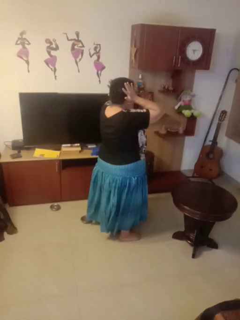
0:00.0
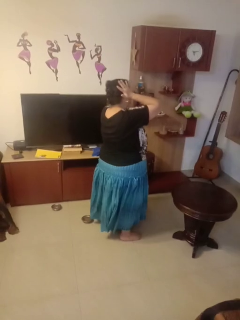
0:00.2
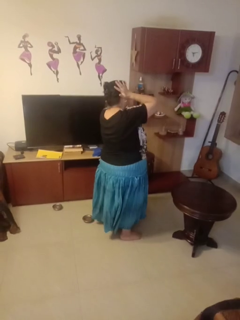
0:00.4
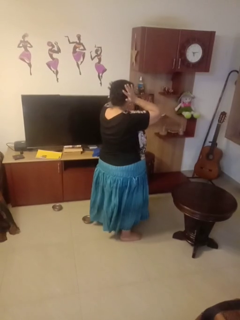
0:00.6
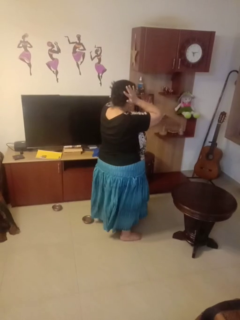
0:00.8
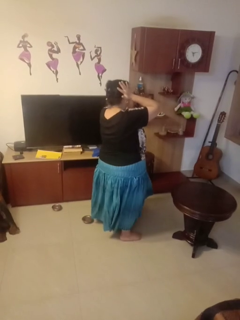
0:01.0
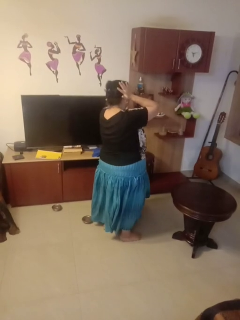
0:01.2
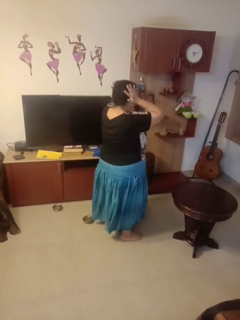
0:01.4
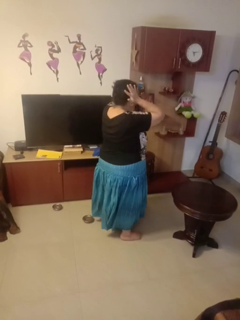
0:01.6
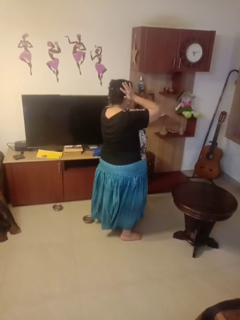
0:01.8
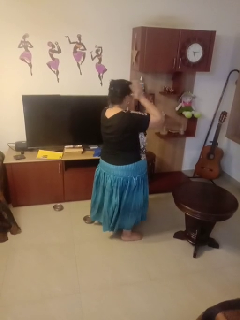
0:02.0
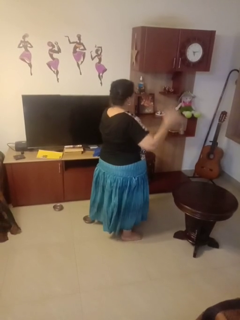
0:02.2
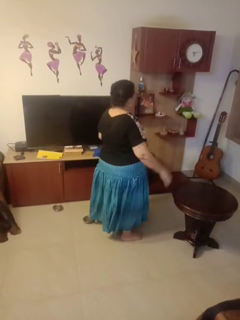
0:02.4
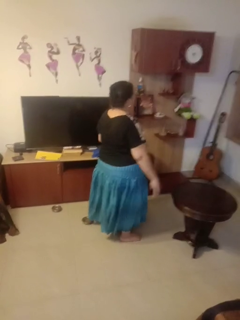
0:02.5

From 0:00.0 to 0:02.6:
person puts fingers in ear

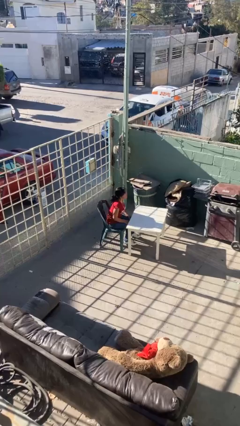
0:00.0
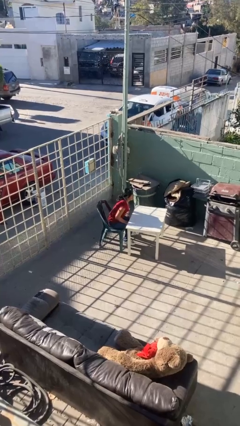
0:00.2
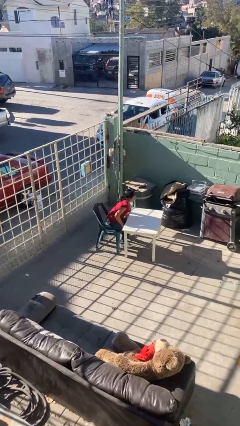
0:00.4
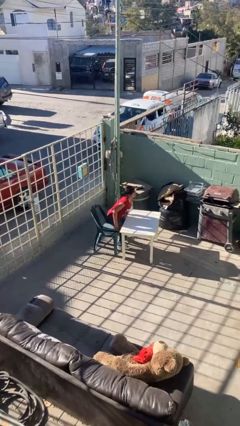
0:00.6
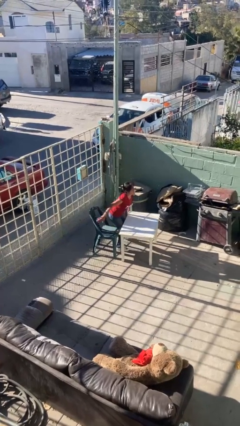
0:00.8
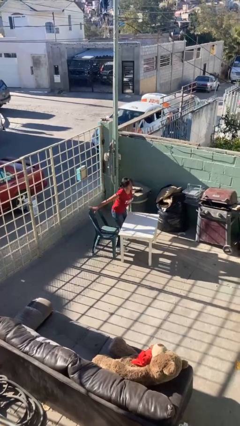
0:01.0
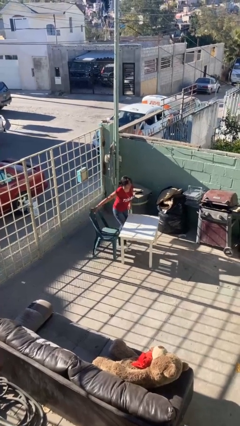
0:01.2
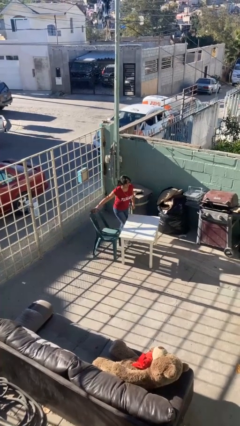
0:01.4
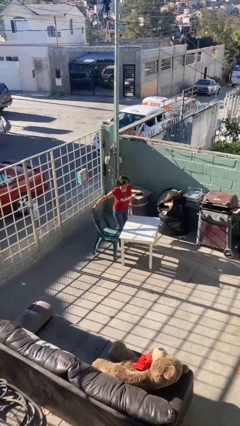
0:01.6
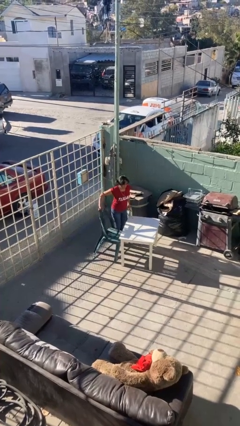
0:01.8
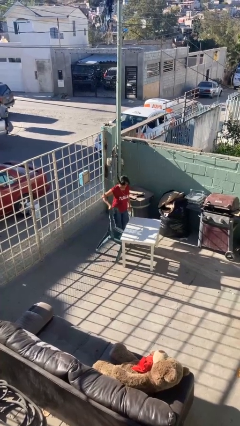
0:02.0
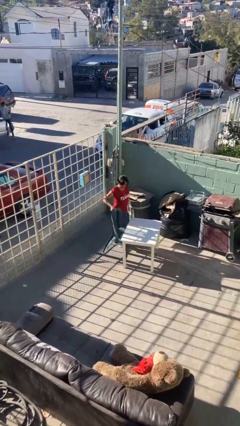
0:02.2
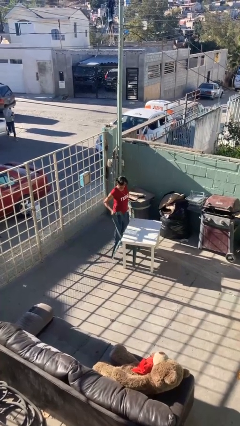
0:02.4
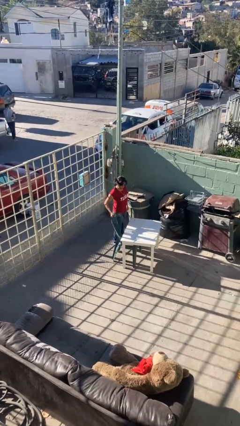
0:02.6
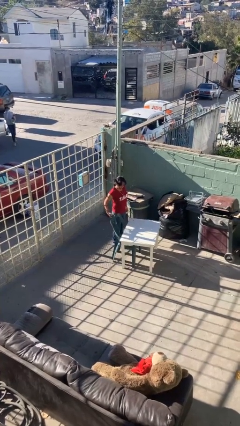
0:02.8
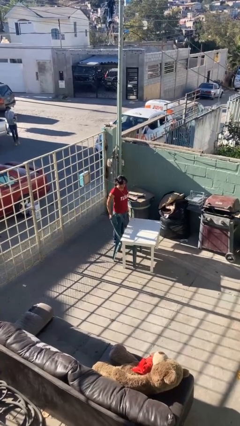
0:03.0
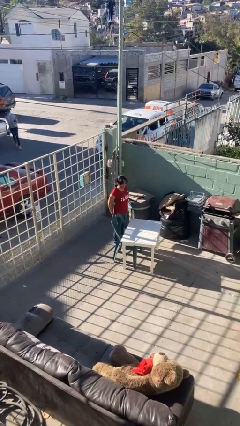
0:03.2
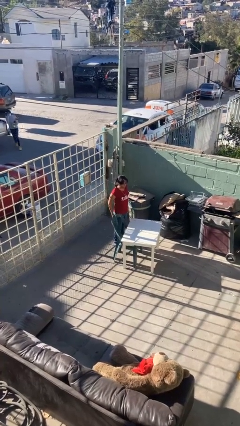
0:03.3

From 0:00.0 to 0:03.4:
person stands up

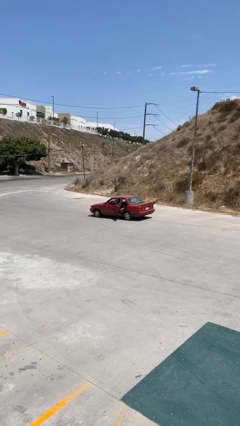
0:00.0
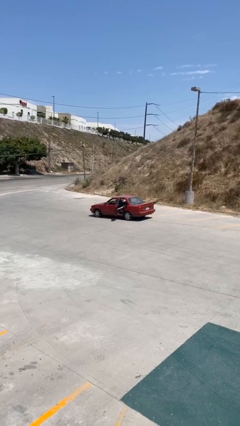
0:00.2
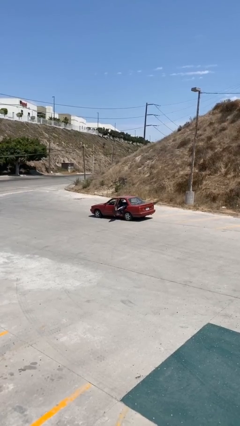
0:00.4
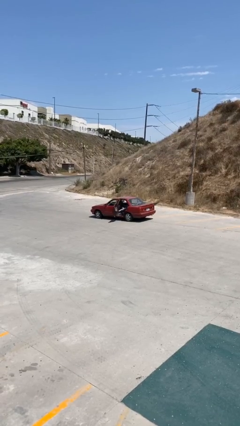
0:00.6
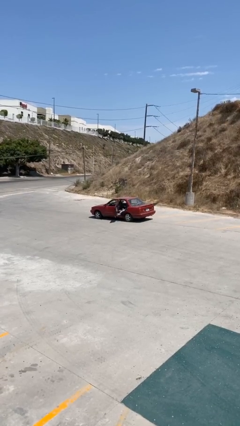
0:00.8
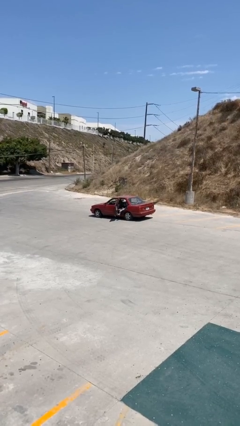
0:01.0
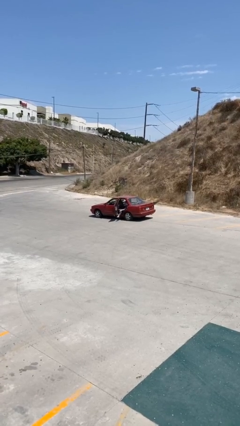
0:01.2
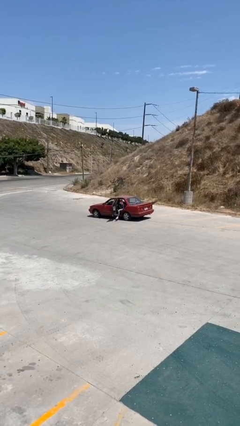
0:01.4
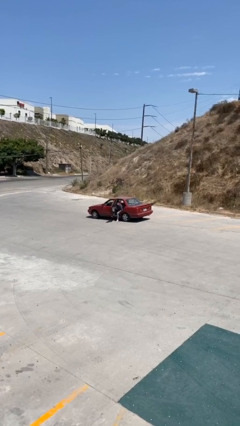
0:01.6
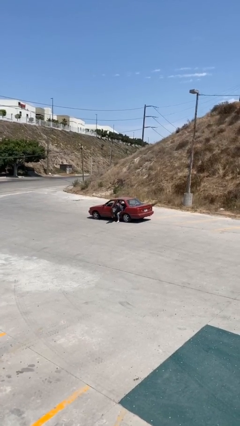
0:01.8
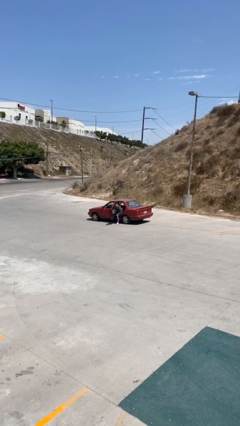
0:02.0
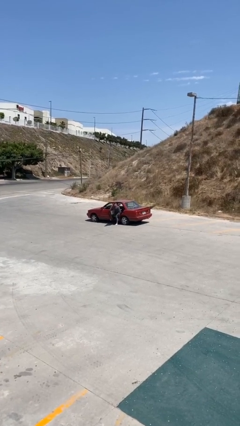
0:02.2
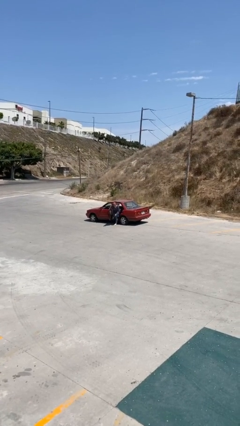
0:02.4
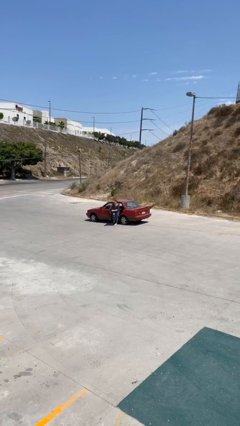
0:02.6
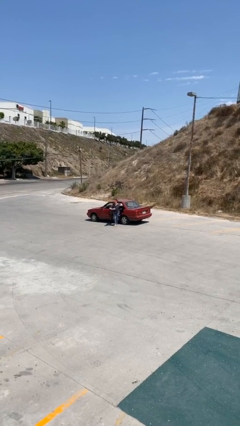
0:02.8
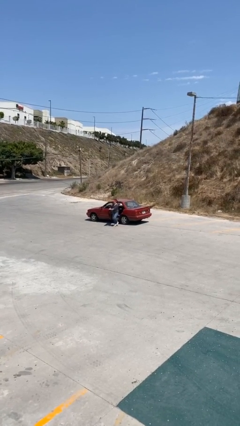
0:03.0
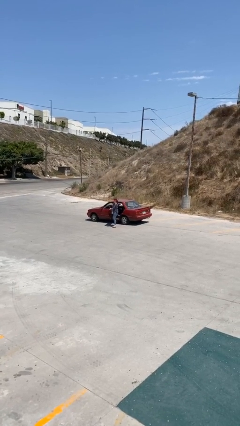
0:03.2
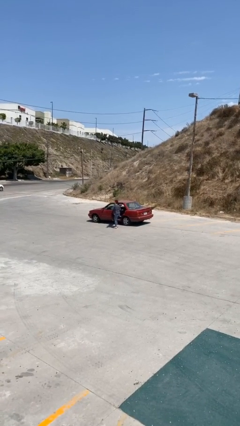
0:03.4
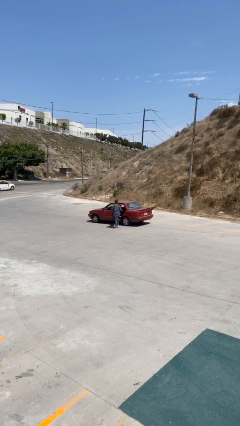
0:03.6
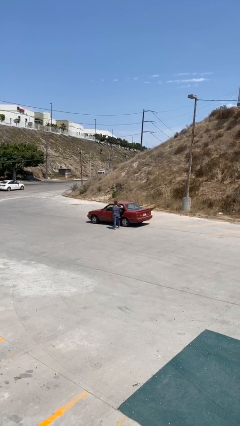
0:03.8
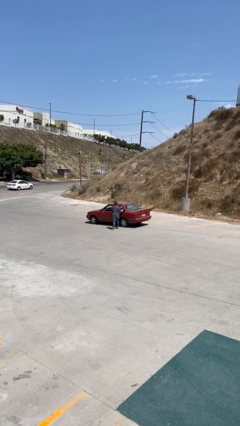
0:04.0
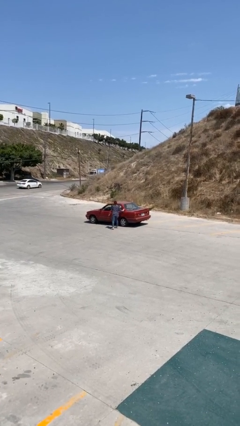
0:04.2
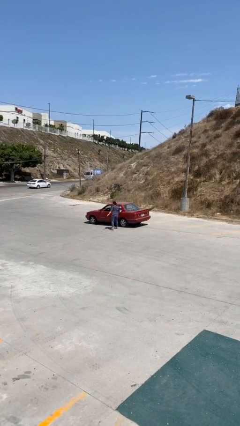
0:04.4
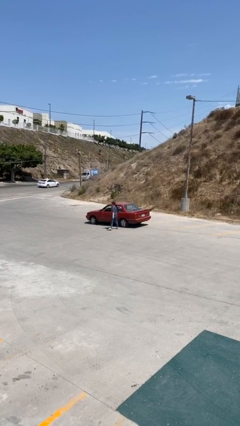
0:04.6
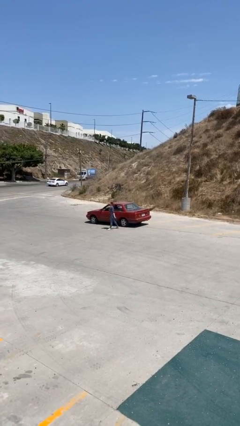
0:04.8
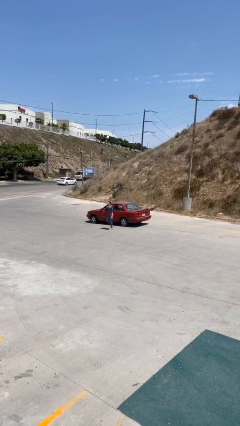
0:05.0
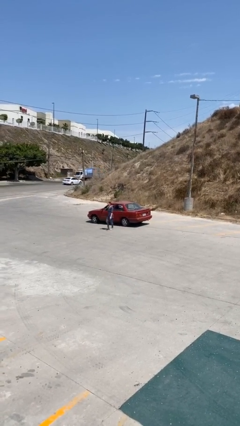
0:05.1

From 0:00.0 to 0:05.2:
car picks up person

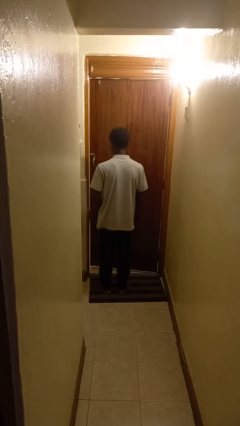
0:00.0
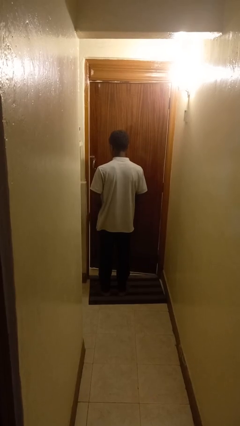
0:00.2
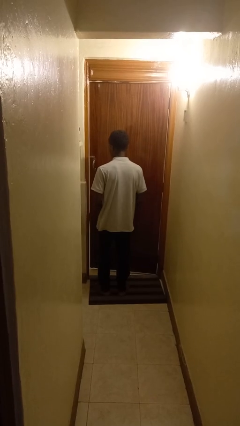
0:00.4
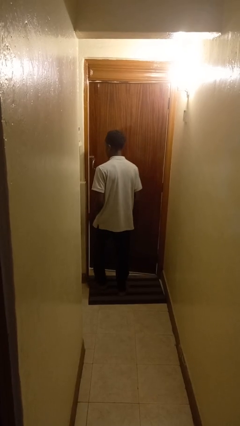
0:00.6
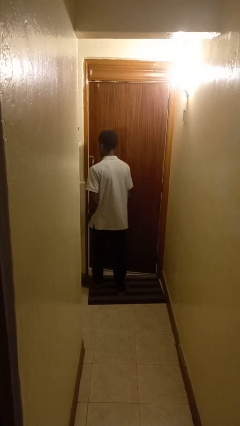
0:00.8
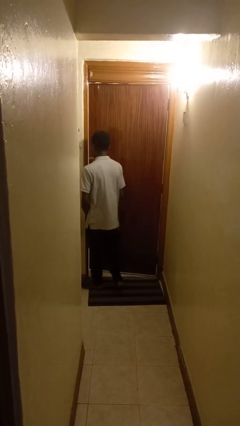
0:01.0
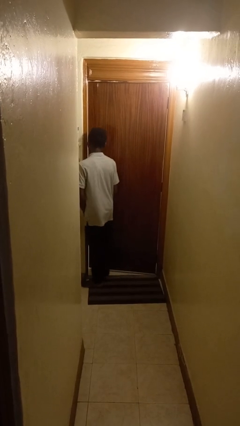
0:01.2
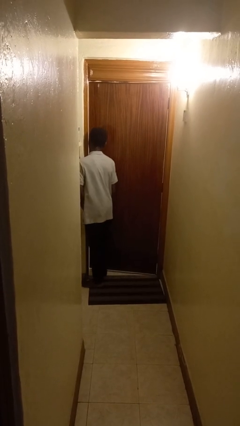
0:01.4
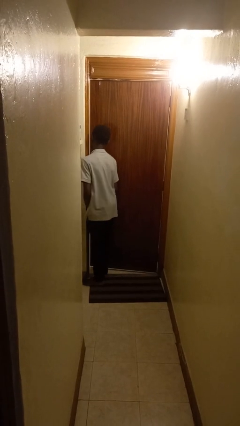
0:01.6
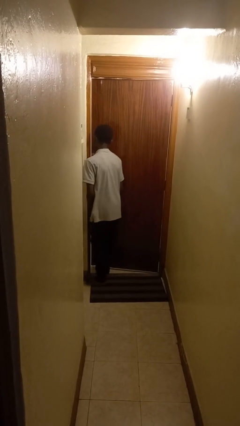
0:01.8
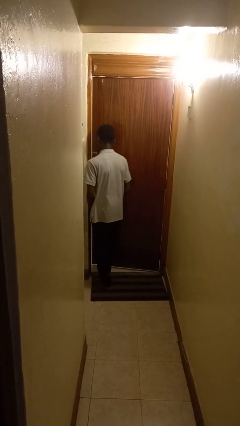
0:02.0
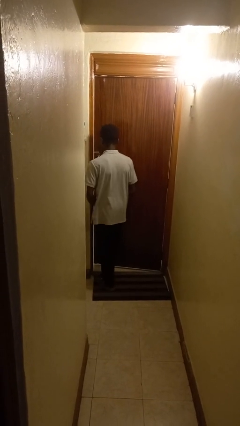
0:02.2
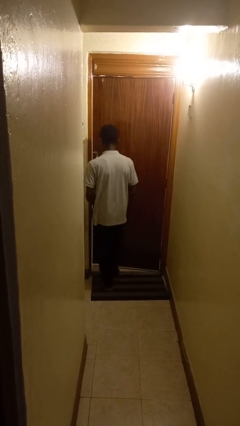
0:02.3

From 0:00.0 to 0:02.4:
person bumps into wall

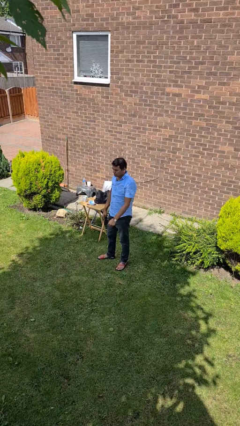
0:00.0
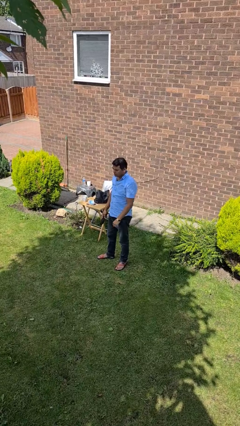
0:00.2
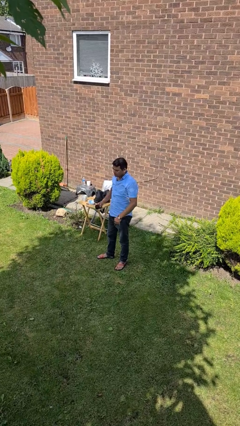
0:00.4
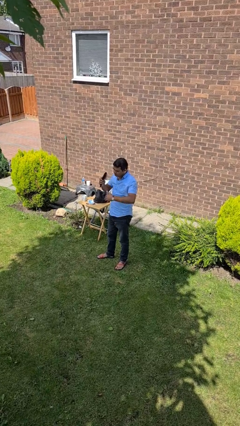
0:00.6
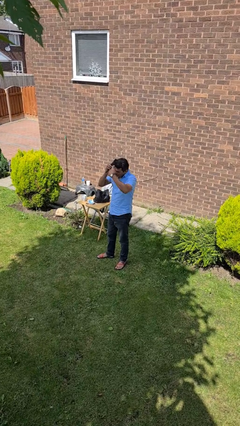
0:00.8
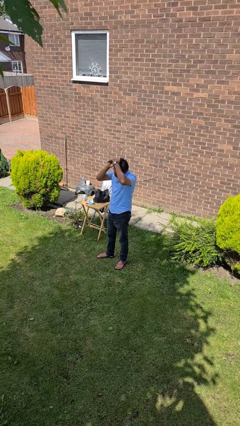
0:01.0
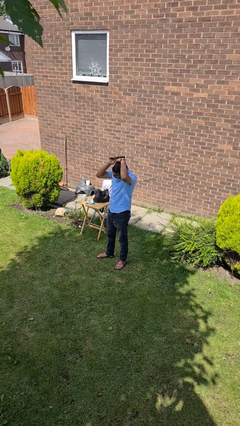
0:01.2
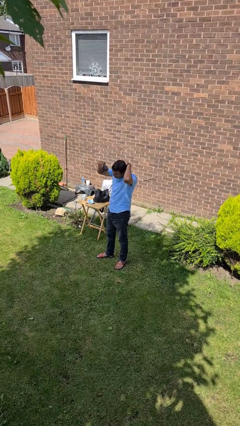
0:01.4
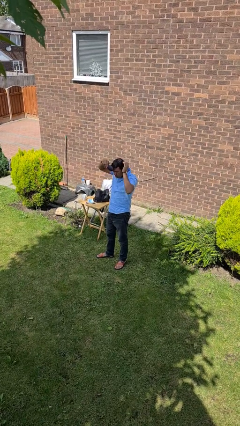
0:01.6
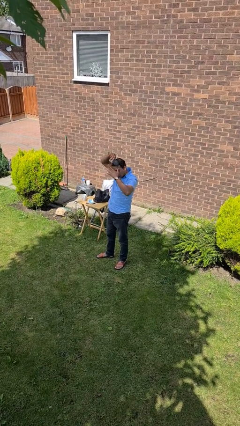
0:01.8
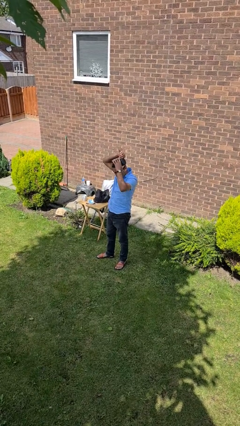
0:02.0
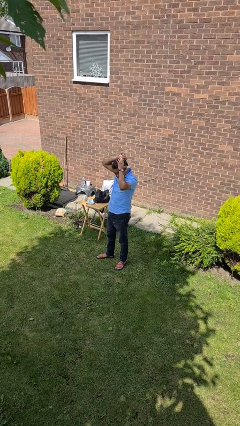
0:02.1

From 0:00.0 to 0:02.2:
person brushes hair

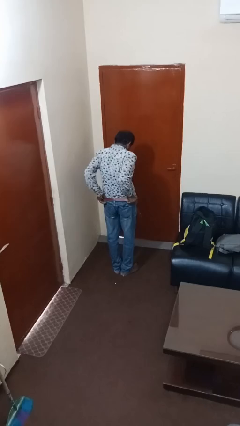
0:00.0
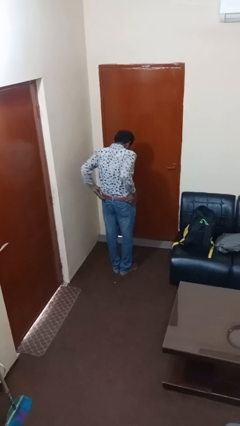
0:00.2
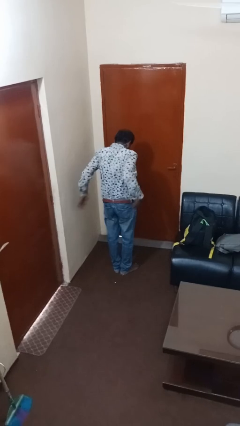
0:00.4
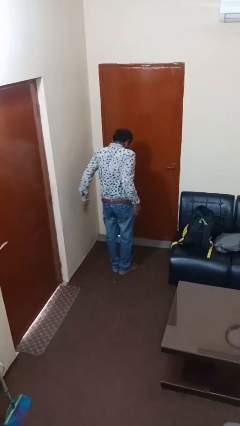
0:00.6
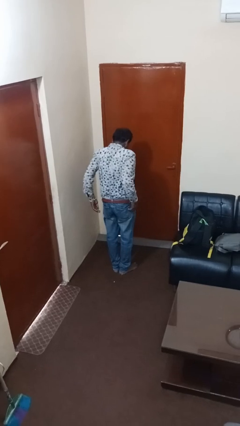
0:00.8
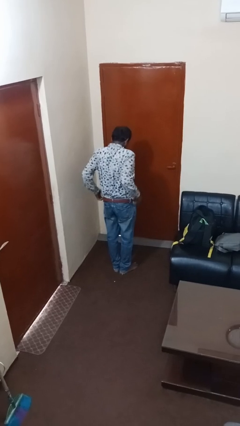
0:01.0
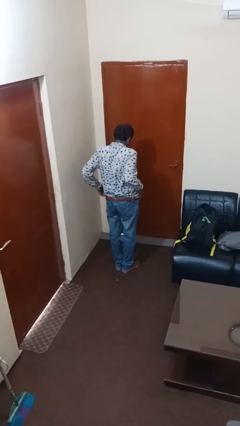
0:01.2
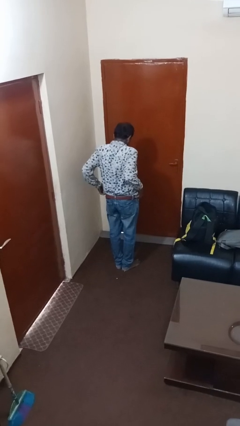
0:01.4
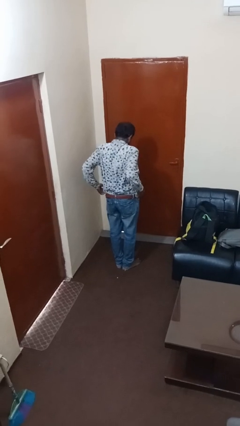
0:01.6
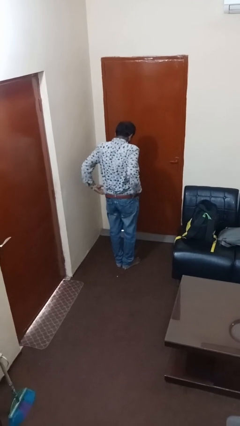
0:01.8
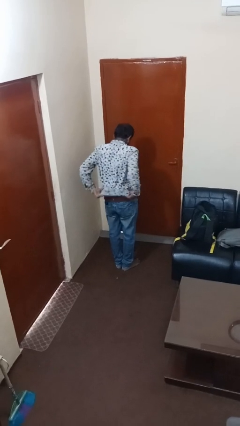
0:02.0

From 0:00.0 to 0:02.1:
person untucks shirt

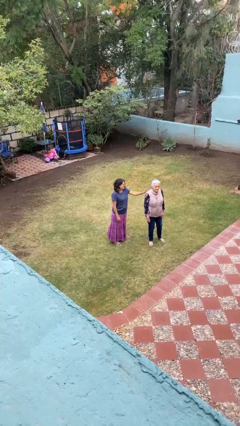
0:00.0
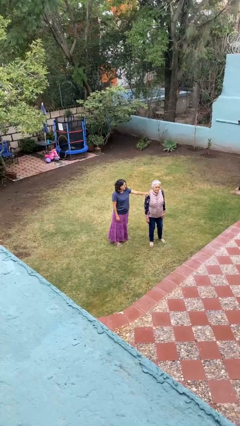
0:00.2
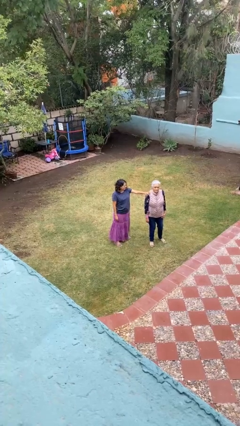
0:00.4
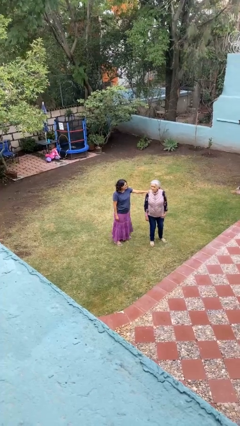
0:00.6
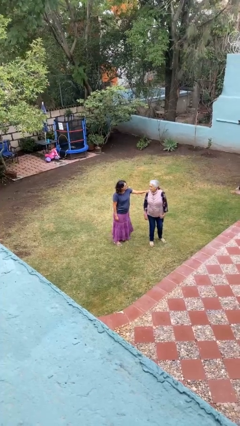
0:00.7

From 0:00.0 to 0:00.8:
person grabs person by shoulder
